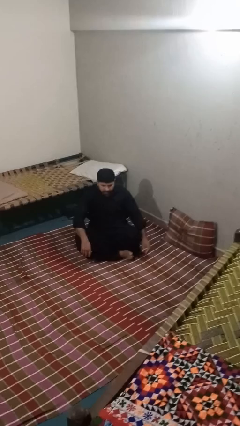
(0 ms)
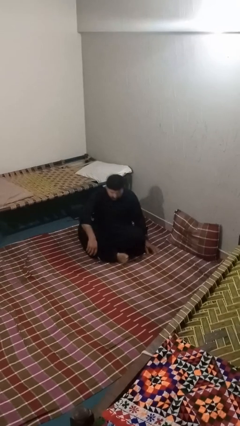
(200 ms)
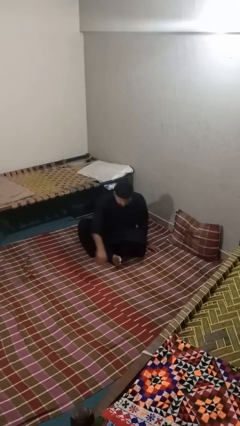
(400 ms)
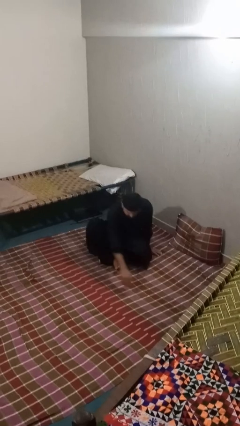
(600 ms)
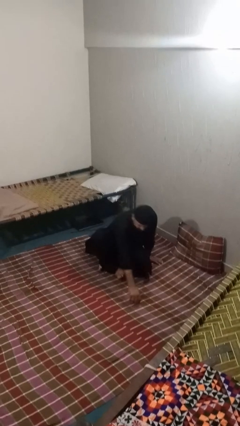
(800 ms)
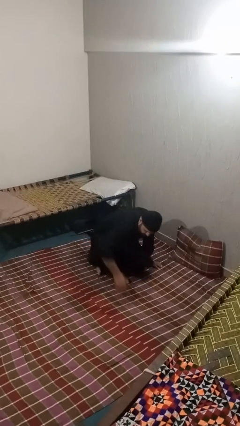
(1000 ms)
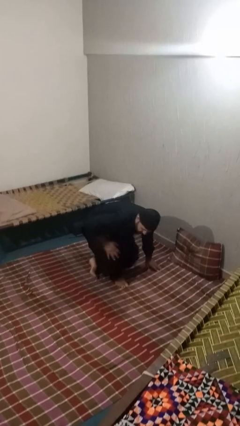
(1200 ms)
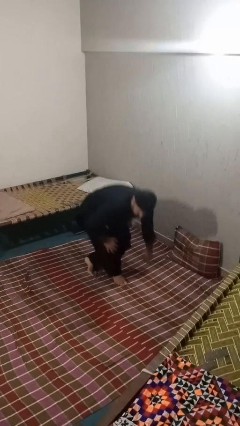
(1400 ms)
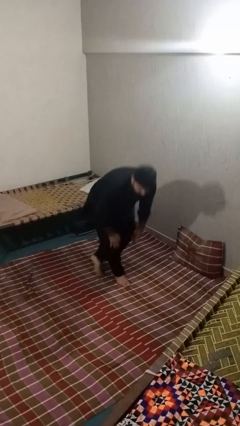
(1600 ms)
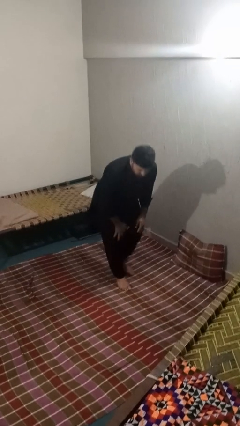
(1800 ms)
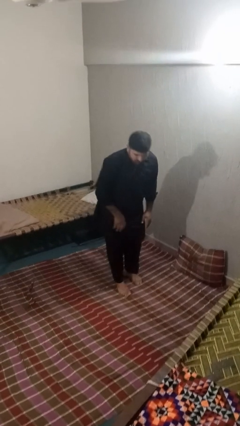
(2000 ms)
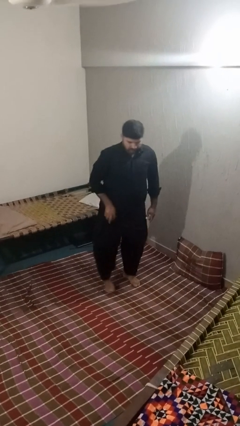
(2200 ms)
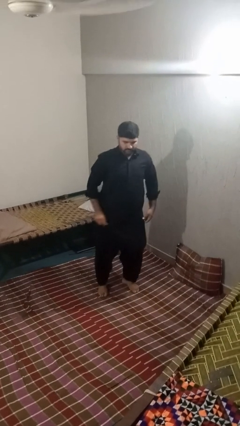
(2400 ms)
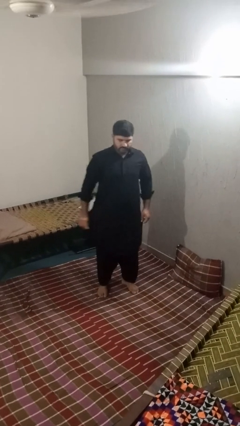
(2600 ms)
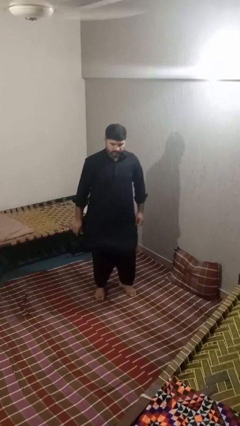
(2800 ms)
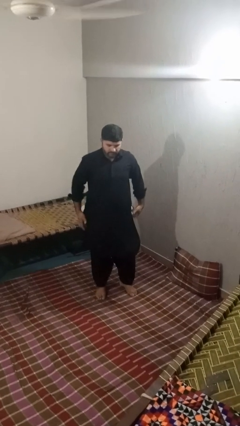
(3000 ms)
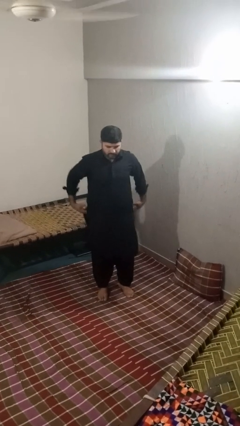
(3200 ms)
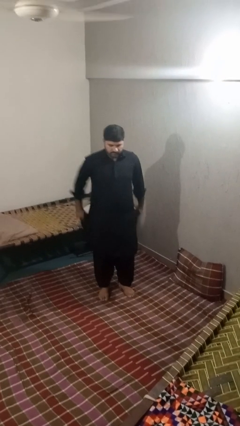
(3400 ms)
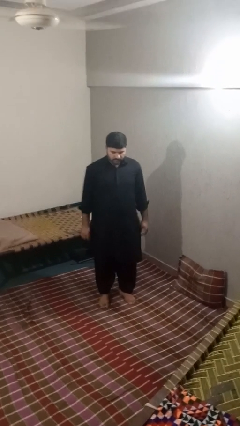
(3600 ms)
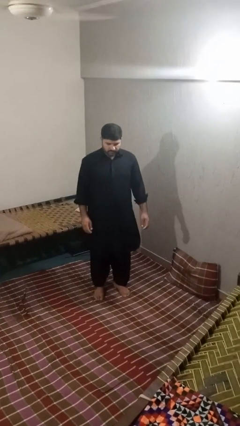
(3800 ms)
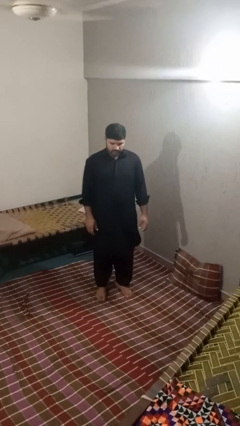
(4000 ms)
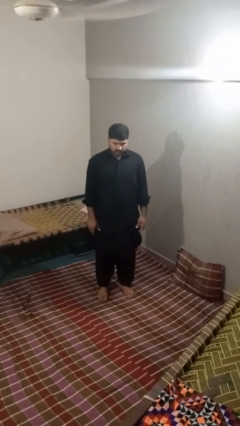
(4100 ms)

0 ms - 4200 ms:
person stands up from floor

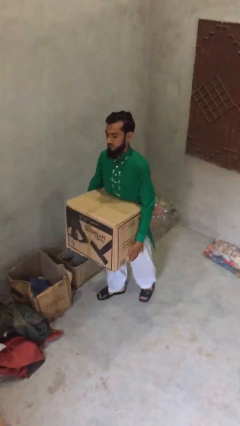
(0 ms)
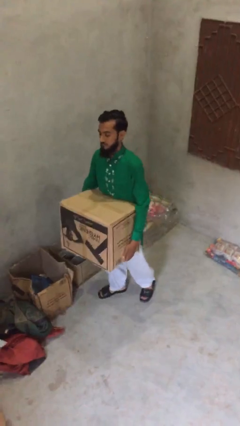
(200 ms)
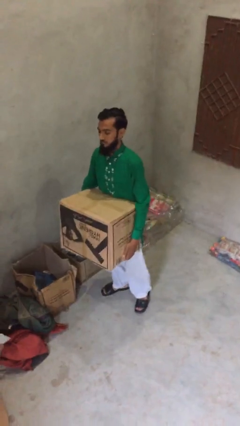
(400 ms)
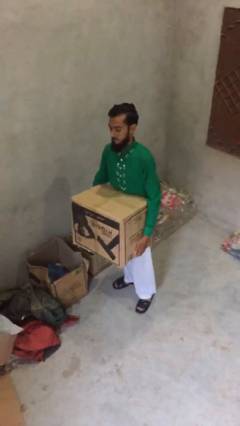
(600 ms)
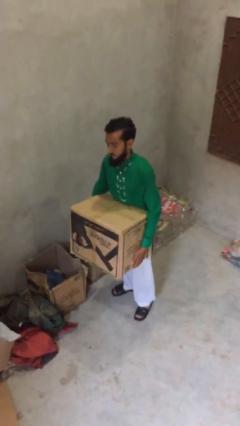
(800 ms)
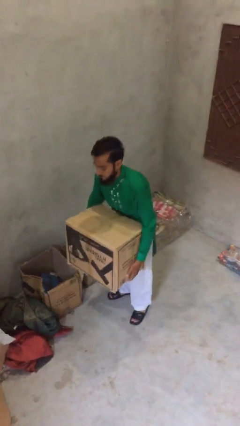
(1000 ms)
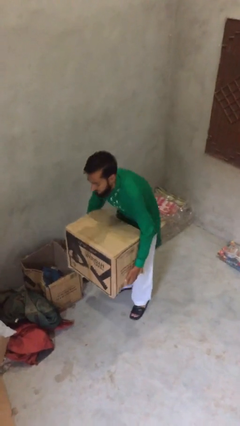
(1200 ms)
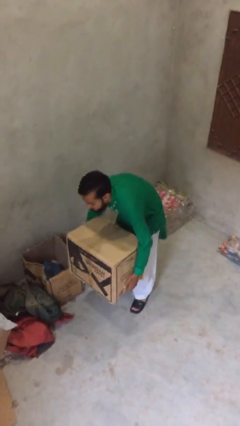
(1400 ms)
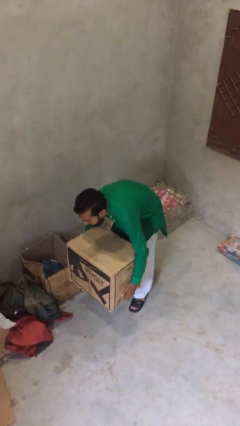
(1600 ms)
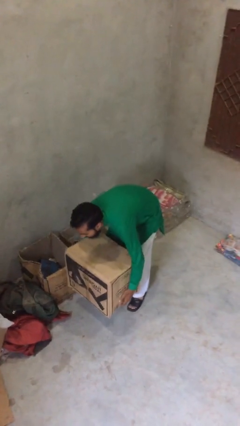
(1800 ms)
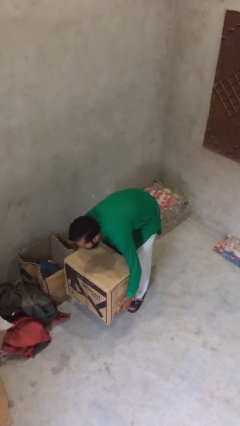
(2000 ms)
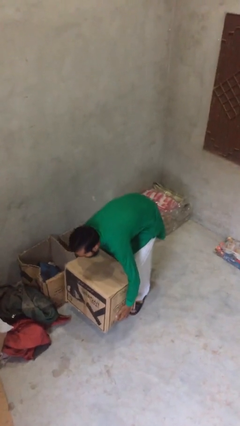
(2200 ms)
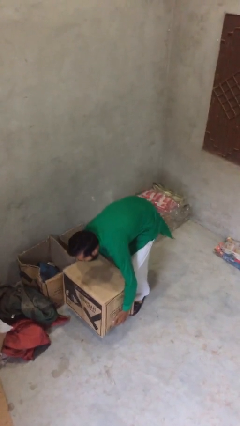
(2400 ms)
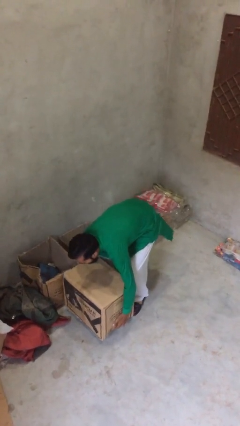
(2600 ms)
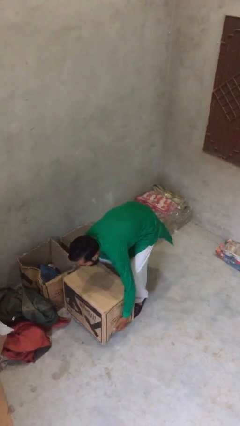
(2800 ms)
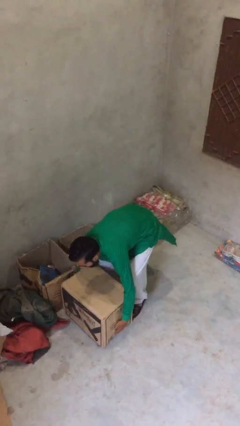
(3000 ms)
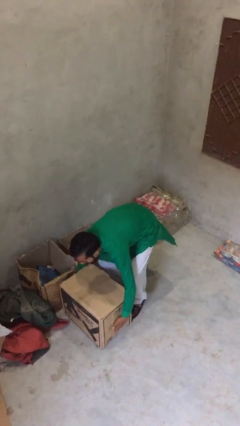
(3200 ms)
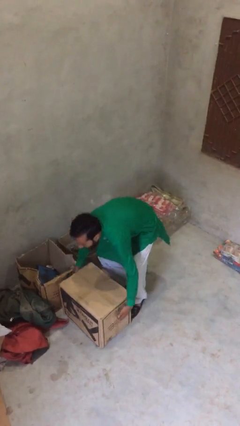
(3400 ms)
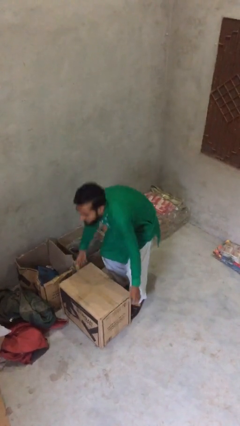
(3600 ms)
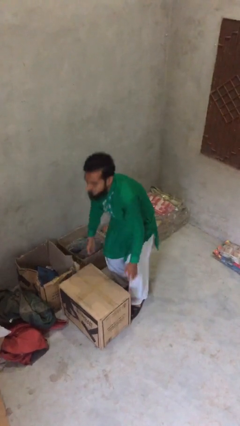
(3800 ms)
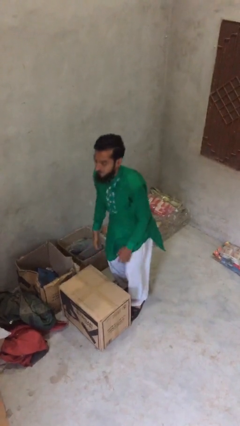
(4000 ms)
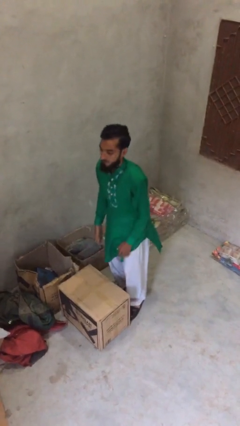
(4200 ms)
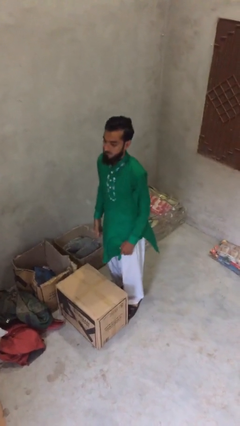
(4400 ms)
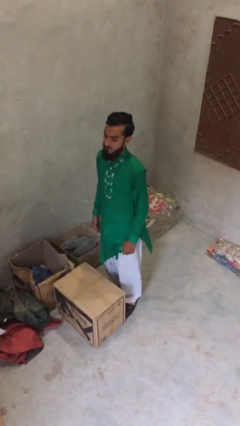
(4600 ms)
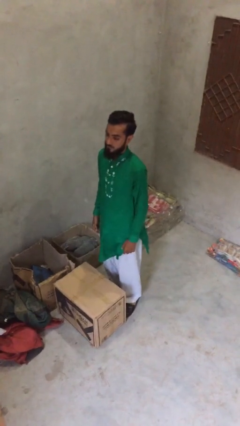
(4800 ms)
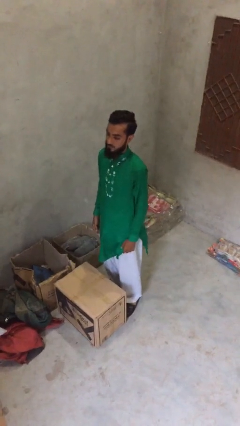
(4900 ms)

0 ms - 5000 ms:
person puts down object on floor

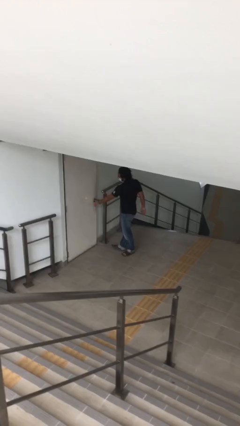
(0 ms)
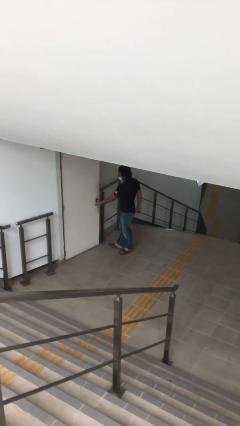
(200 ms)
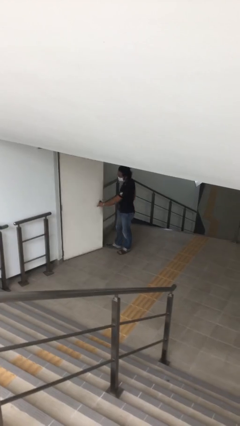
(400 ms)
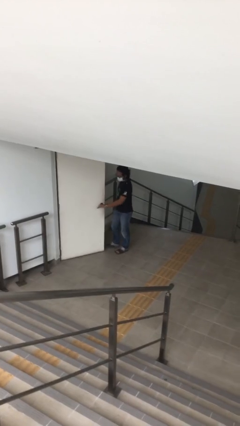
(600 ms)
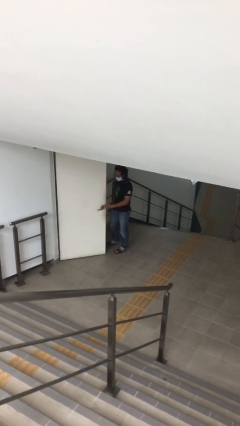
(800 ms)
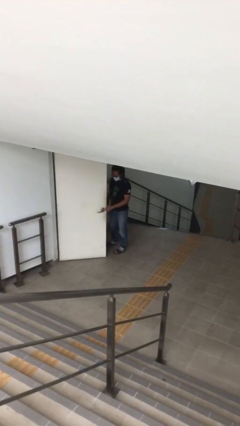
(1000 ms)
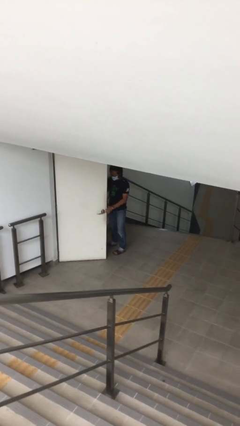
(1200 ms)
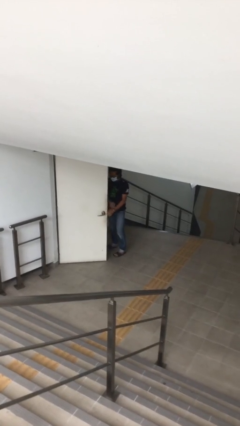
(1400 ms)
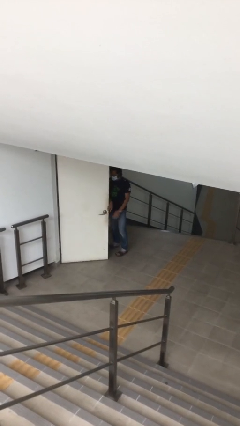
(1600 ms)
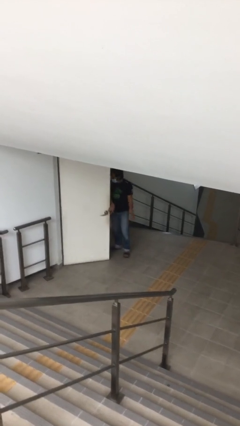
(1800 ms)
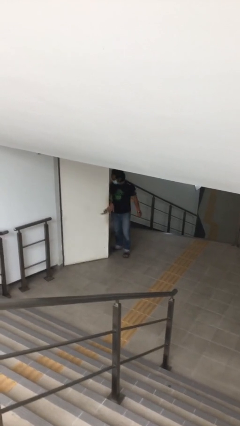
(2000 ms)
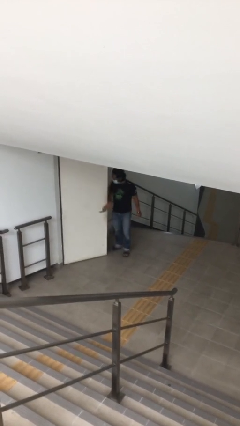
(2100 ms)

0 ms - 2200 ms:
person opens facility door

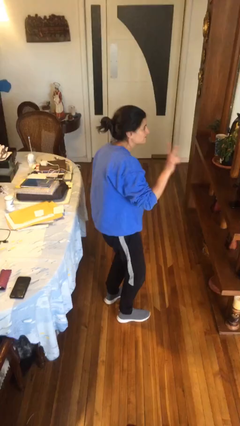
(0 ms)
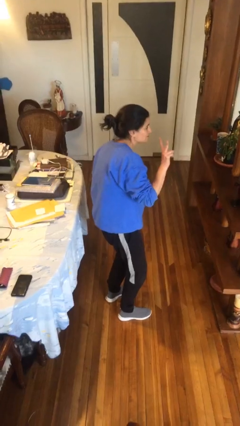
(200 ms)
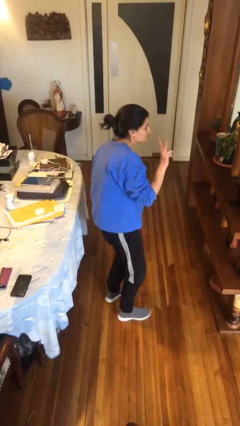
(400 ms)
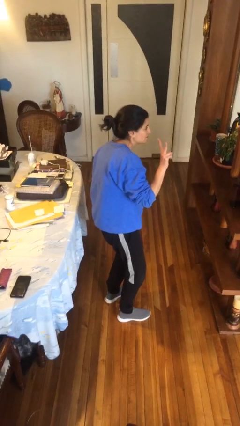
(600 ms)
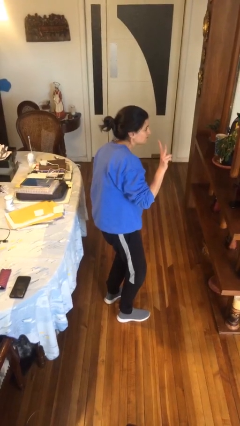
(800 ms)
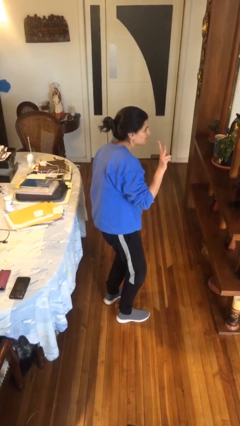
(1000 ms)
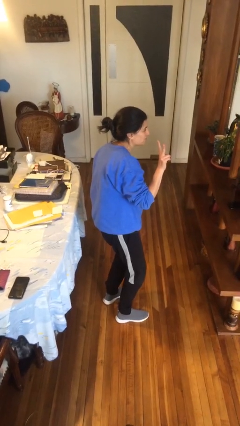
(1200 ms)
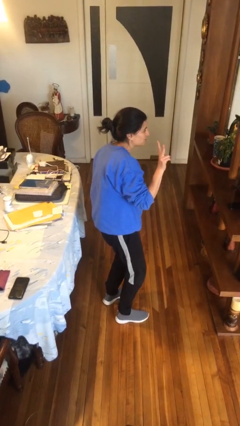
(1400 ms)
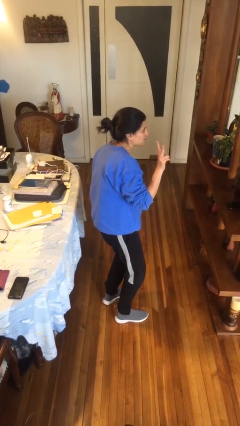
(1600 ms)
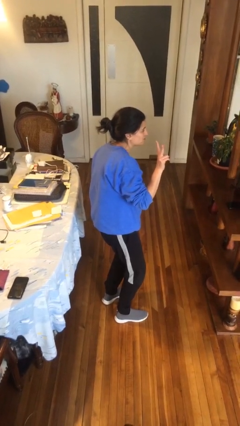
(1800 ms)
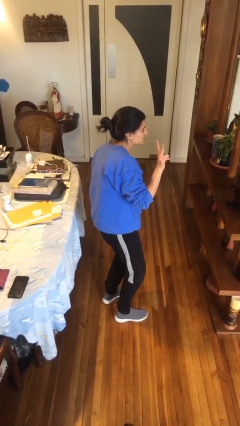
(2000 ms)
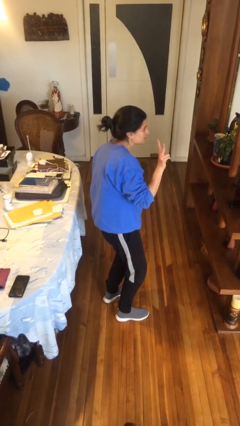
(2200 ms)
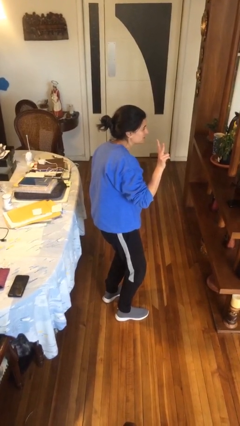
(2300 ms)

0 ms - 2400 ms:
person gestures peace

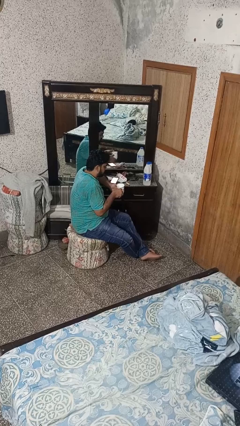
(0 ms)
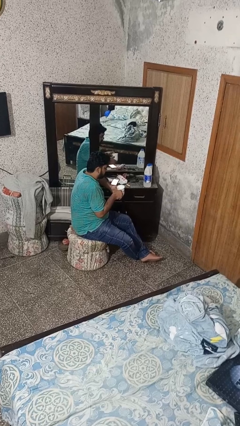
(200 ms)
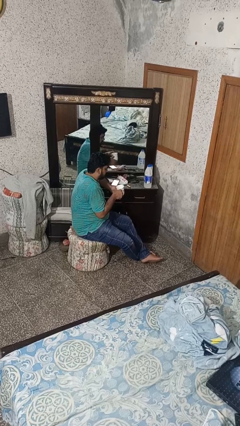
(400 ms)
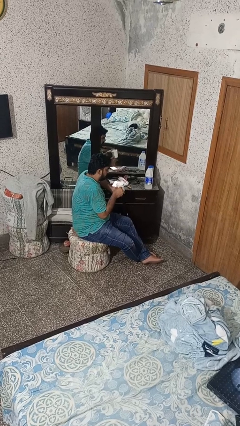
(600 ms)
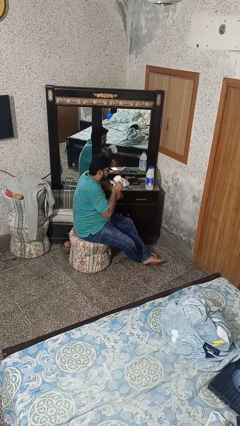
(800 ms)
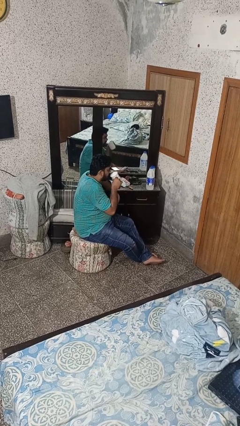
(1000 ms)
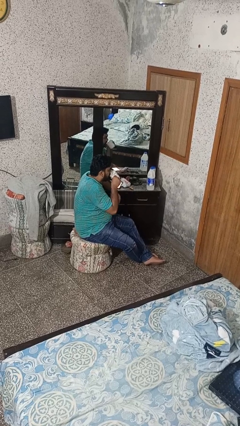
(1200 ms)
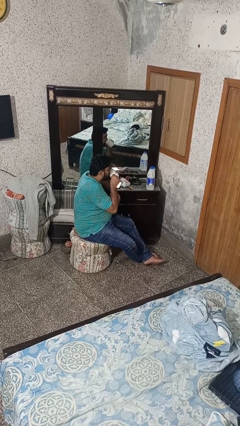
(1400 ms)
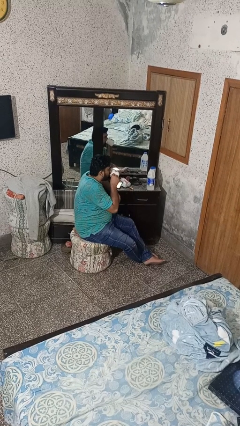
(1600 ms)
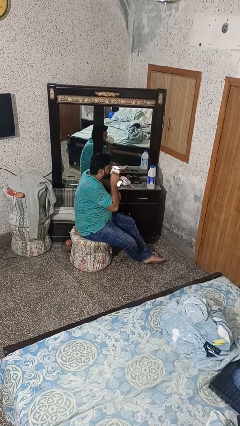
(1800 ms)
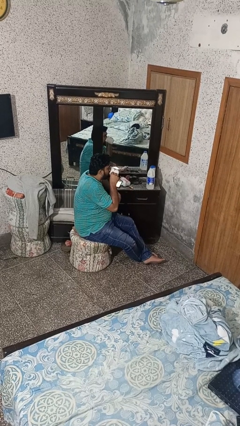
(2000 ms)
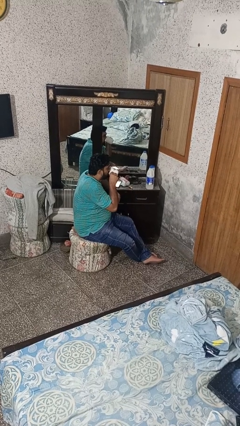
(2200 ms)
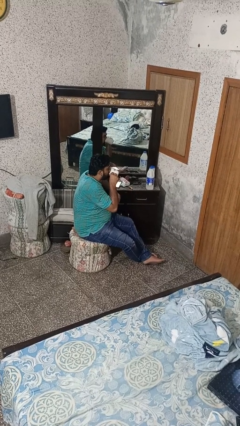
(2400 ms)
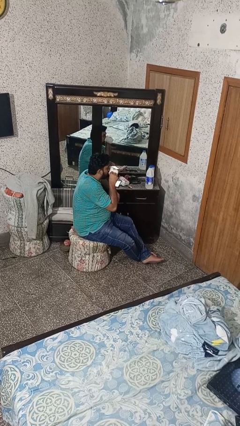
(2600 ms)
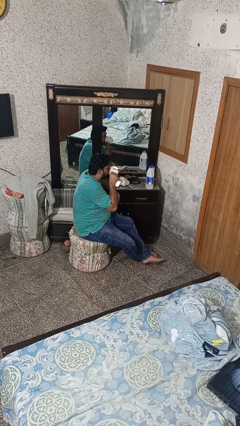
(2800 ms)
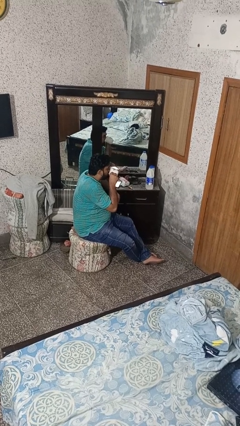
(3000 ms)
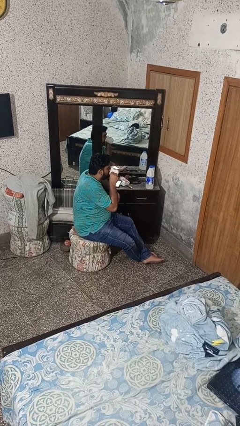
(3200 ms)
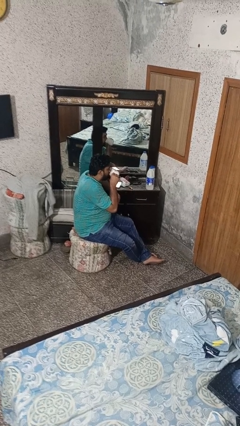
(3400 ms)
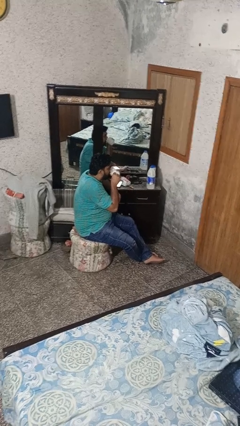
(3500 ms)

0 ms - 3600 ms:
person drinks from mug
